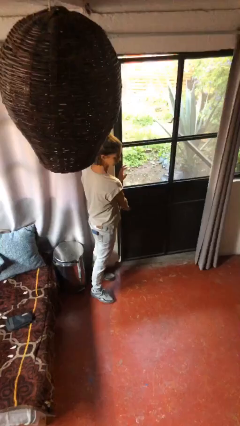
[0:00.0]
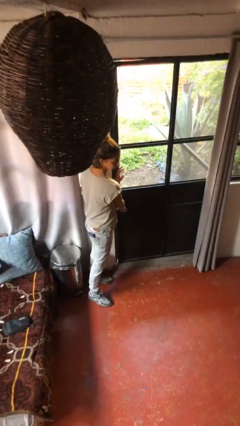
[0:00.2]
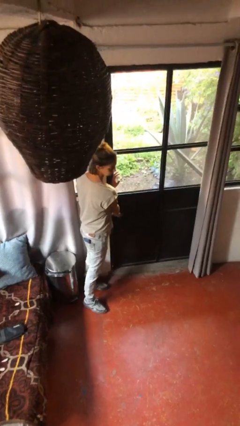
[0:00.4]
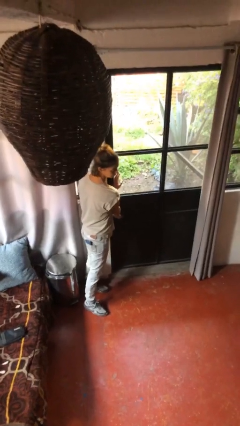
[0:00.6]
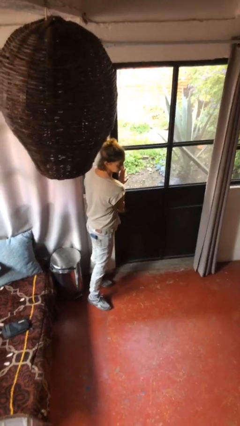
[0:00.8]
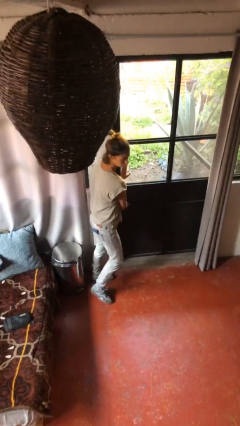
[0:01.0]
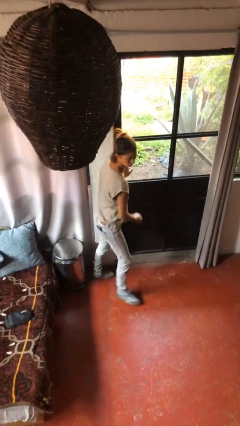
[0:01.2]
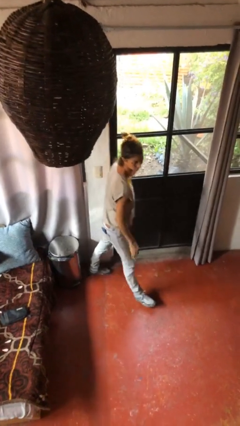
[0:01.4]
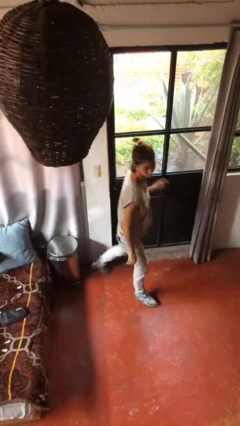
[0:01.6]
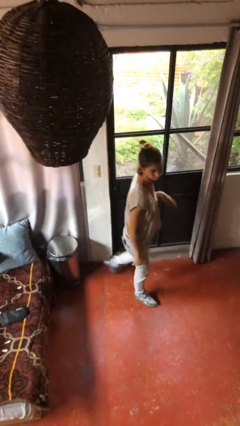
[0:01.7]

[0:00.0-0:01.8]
person closes facility door

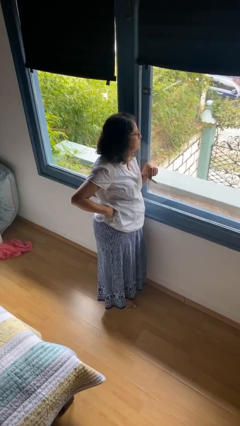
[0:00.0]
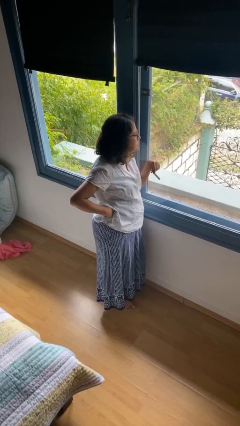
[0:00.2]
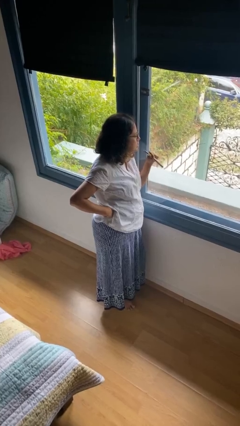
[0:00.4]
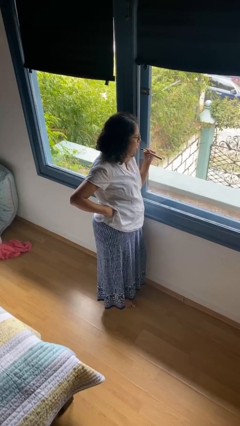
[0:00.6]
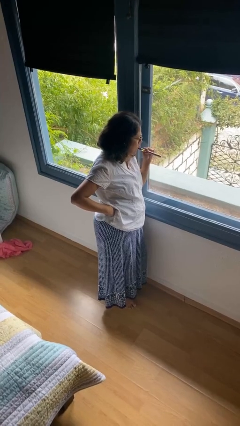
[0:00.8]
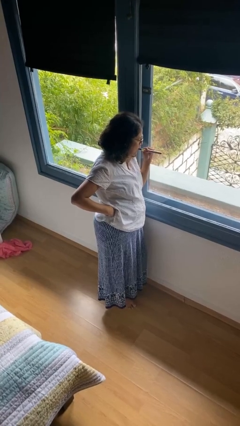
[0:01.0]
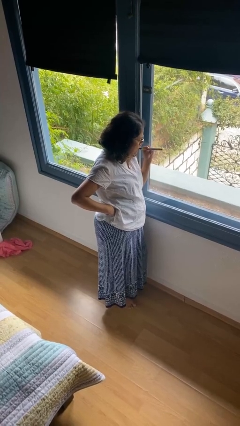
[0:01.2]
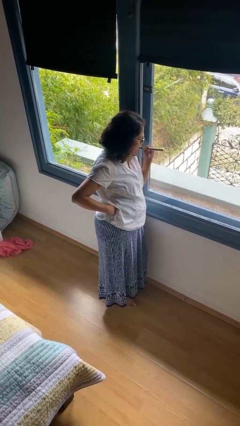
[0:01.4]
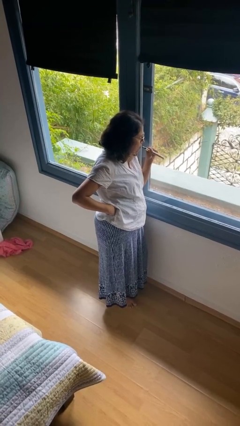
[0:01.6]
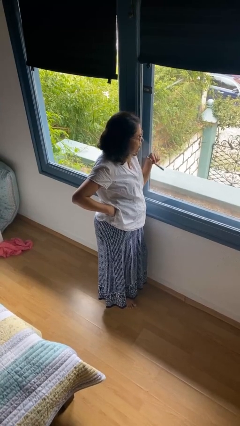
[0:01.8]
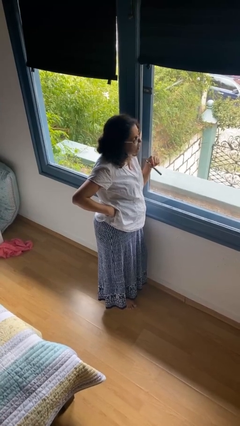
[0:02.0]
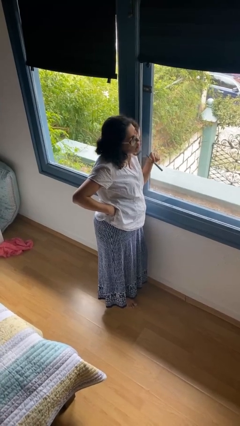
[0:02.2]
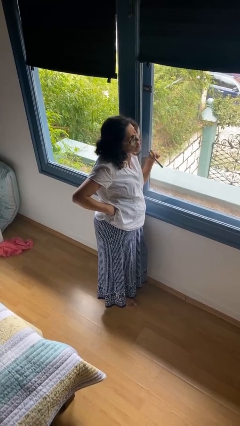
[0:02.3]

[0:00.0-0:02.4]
person vapes

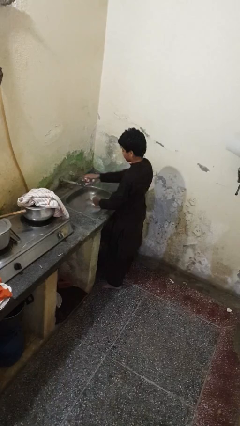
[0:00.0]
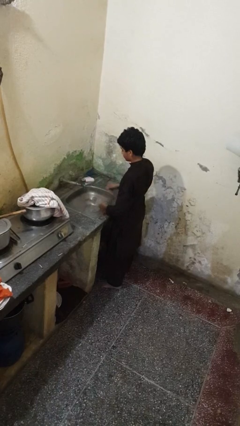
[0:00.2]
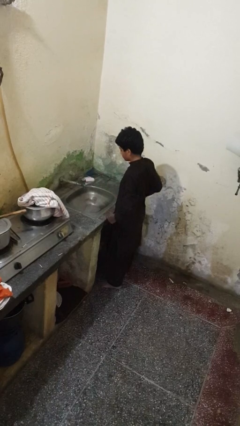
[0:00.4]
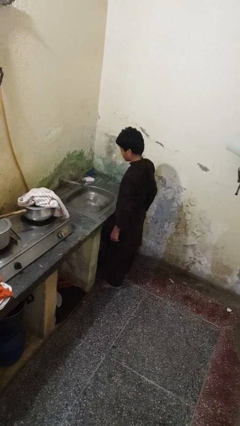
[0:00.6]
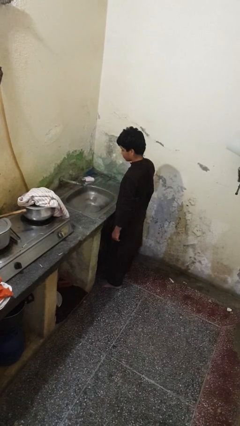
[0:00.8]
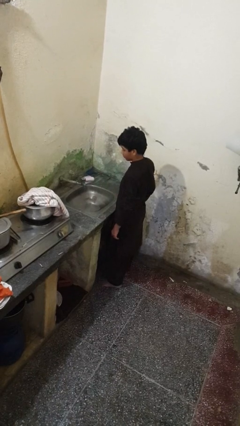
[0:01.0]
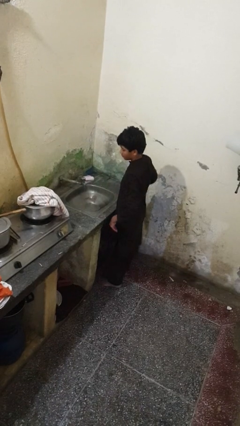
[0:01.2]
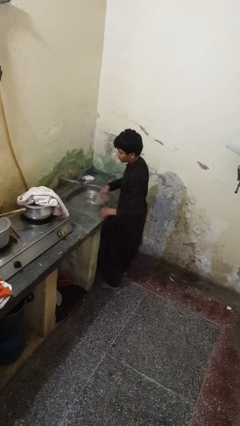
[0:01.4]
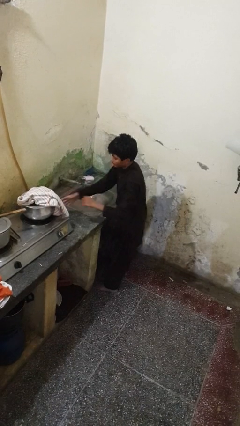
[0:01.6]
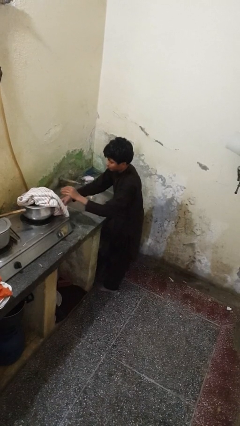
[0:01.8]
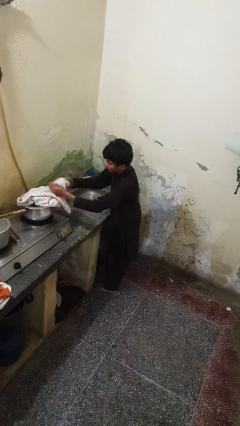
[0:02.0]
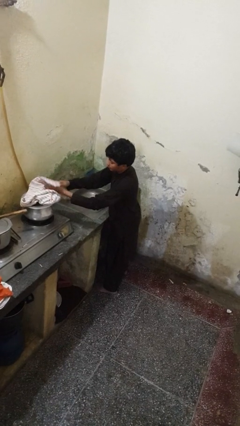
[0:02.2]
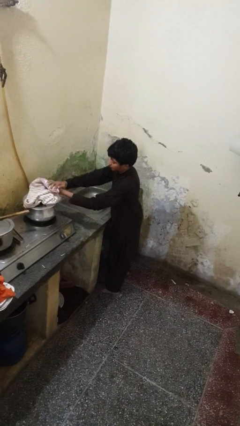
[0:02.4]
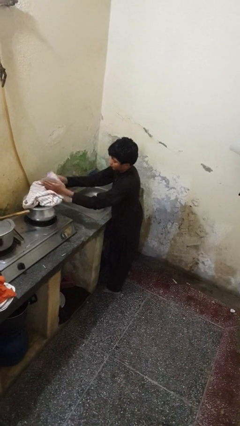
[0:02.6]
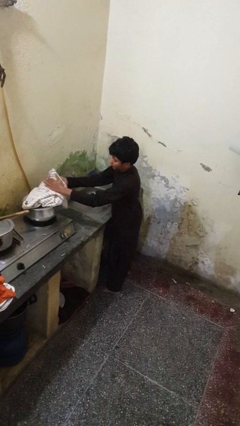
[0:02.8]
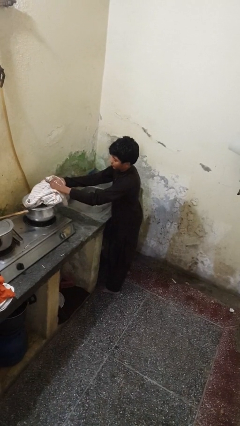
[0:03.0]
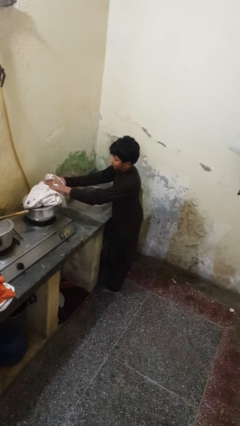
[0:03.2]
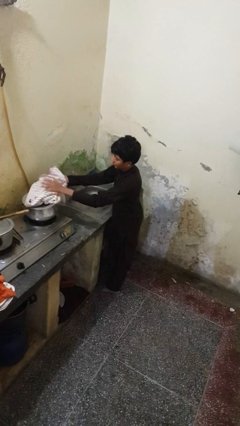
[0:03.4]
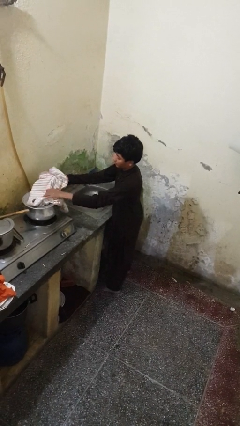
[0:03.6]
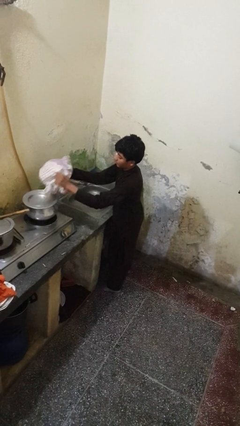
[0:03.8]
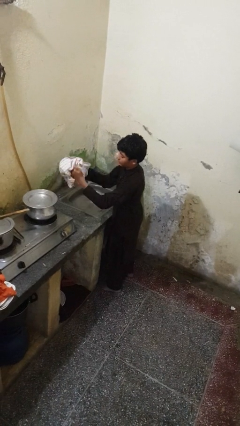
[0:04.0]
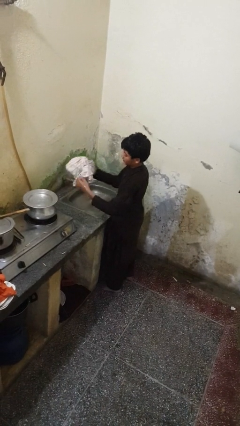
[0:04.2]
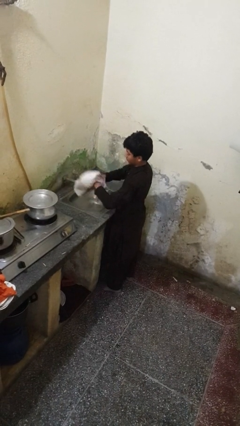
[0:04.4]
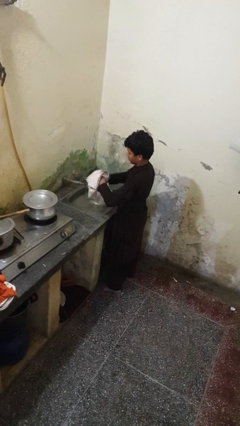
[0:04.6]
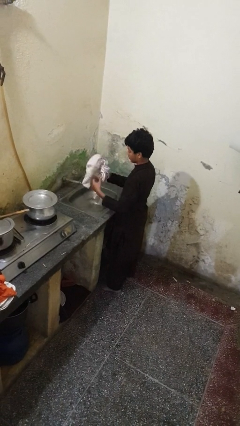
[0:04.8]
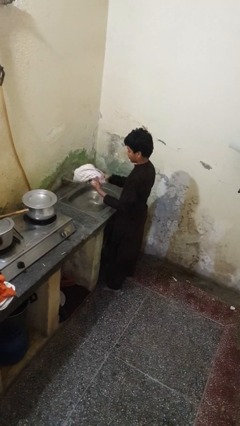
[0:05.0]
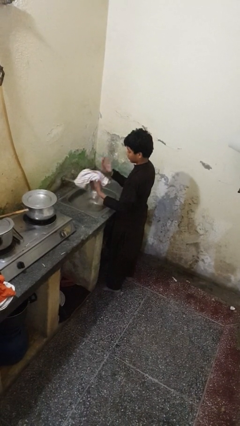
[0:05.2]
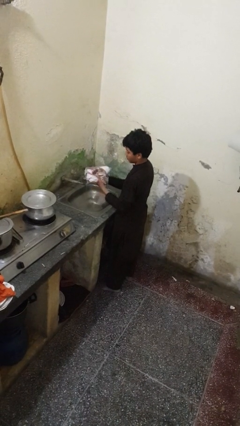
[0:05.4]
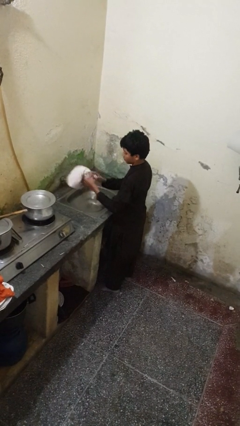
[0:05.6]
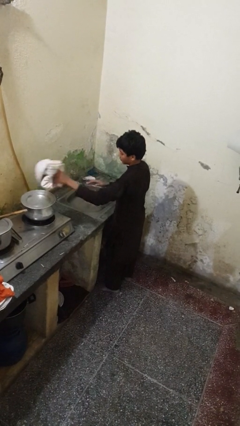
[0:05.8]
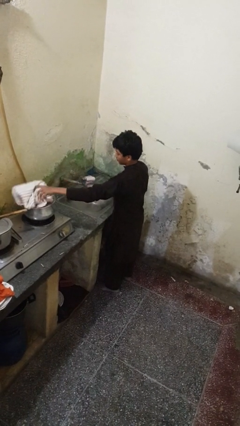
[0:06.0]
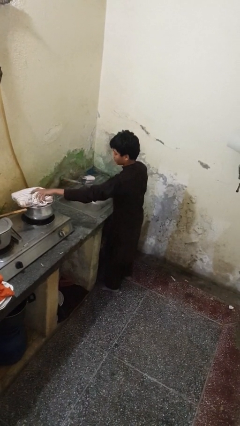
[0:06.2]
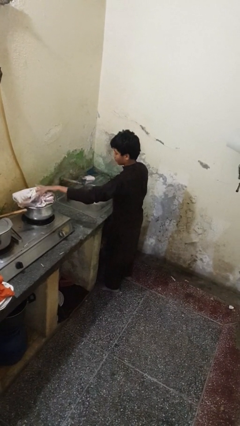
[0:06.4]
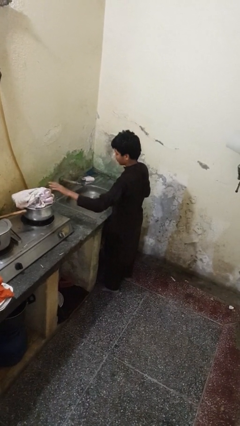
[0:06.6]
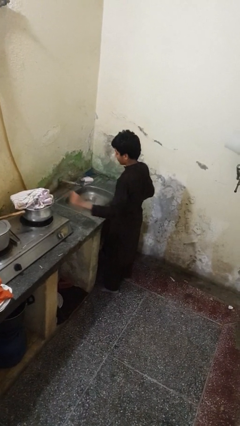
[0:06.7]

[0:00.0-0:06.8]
person dries hands with towel

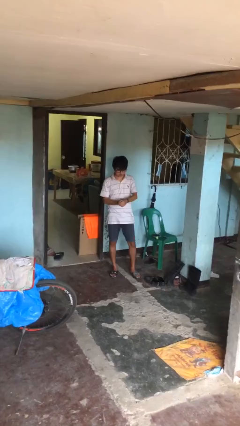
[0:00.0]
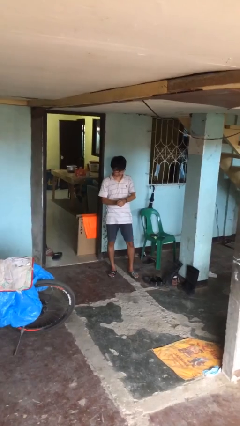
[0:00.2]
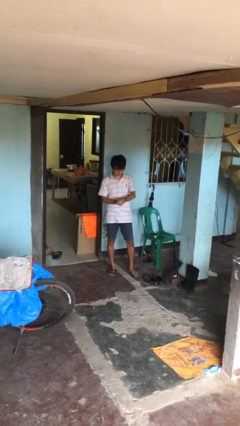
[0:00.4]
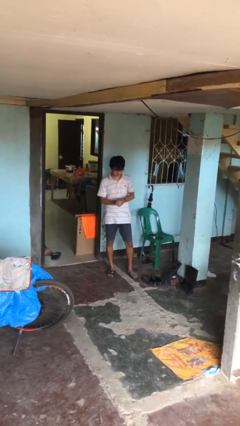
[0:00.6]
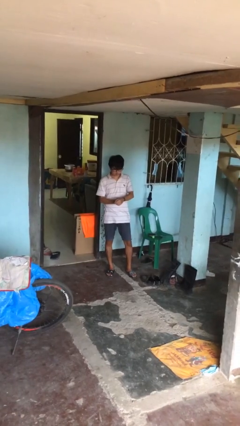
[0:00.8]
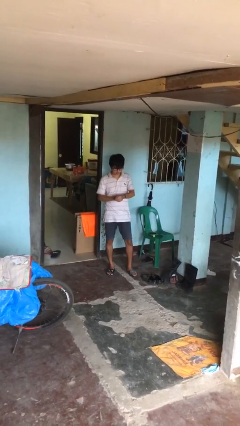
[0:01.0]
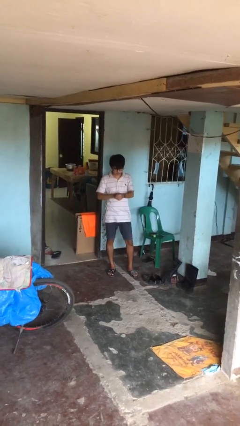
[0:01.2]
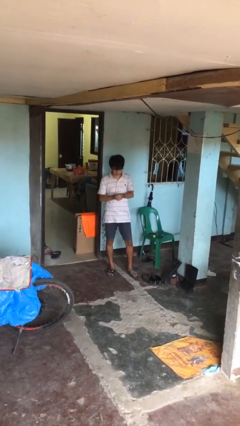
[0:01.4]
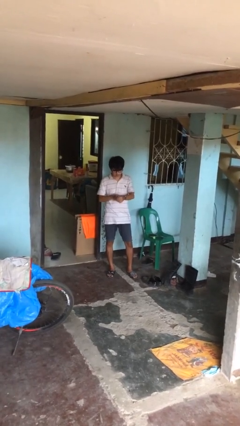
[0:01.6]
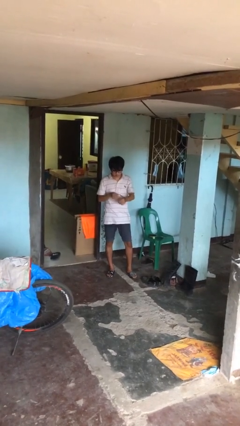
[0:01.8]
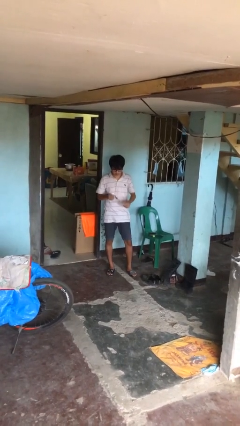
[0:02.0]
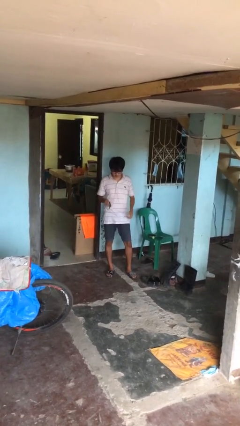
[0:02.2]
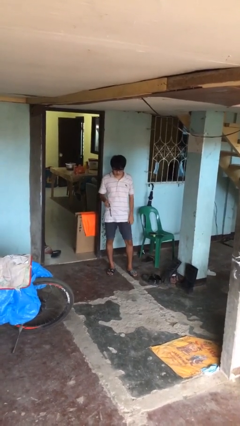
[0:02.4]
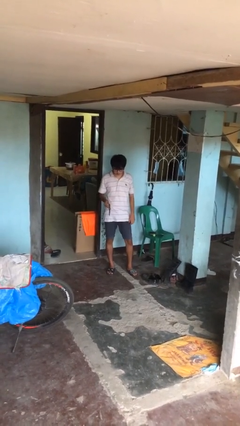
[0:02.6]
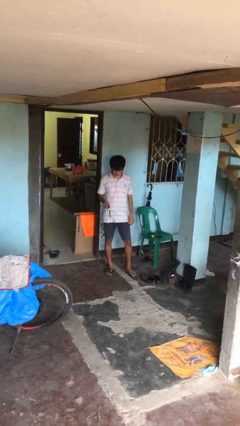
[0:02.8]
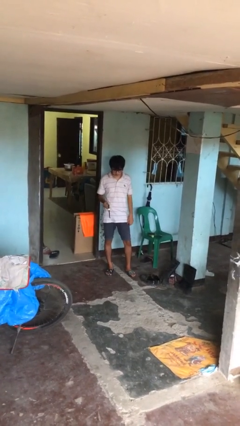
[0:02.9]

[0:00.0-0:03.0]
person takes off wristwatch

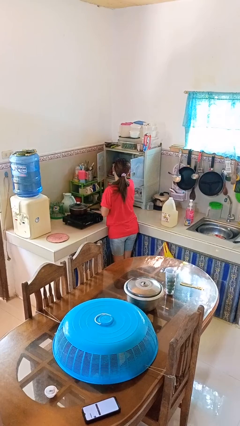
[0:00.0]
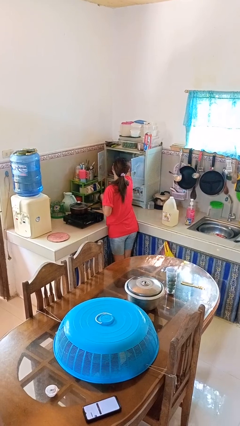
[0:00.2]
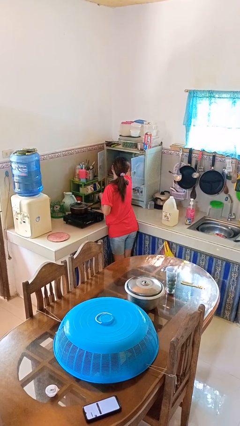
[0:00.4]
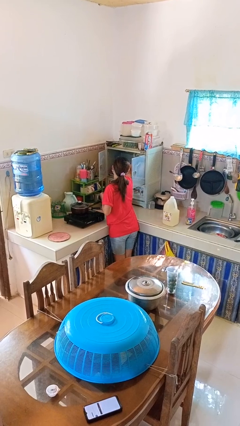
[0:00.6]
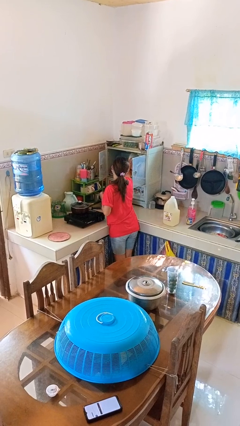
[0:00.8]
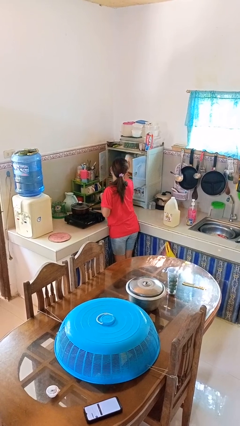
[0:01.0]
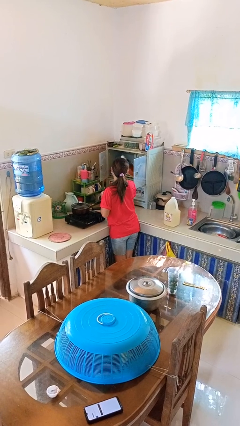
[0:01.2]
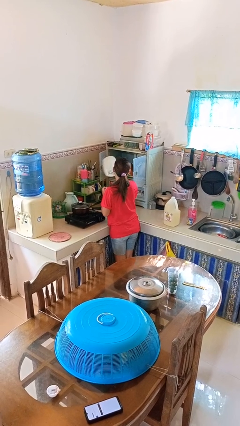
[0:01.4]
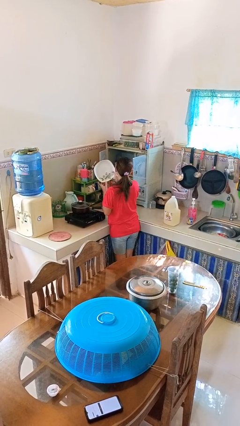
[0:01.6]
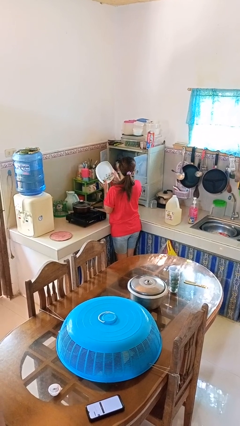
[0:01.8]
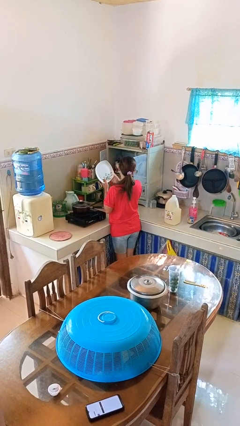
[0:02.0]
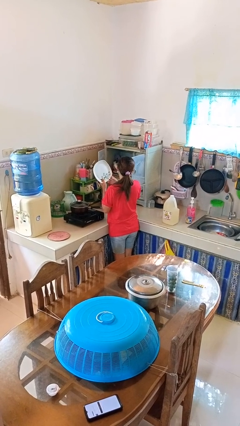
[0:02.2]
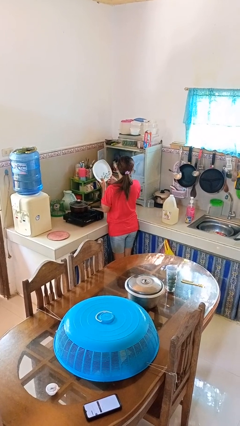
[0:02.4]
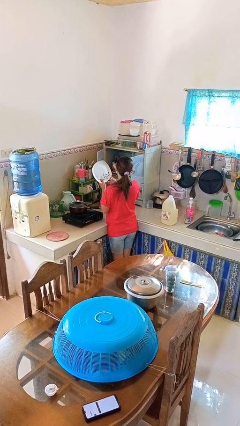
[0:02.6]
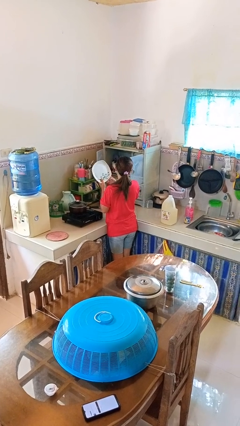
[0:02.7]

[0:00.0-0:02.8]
person takes object from cabinet

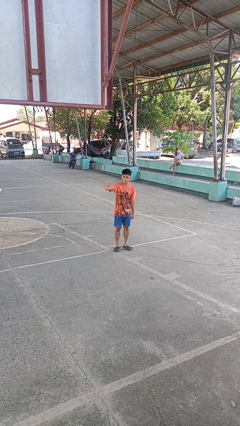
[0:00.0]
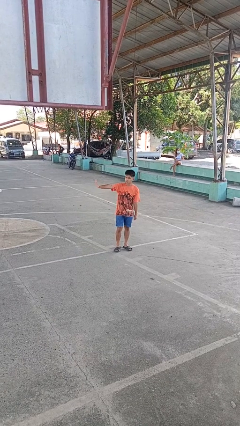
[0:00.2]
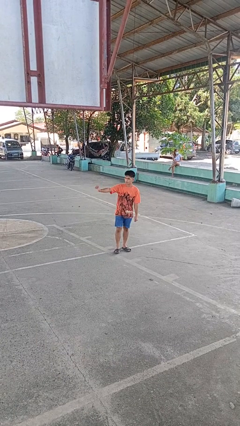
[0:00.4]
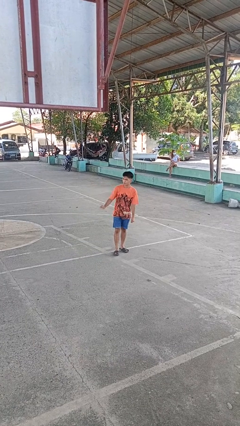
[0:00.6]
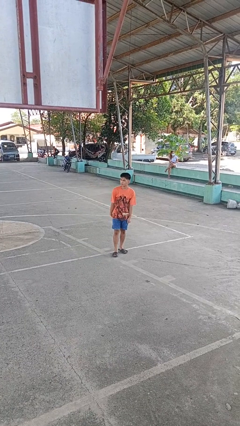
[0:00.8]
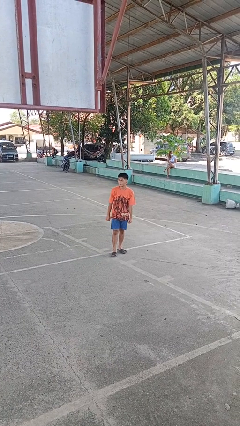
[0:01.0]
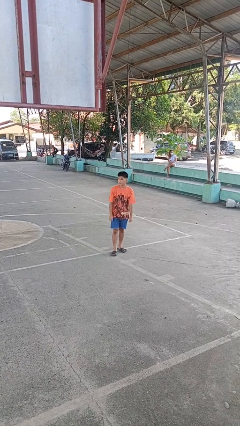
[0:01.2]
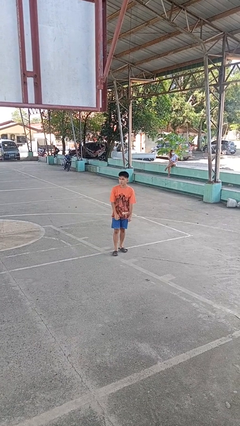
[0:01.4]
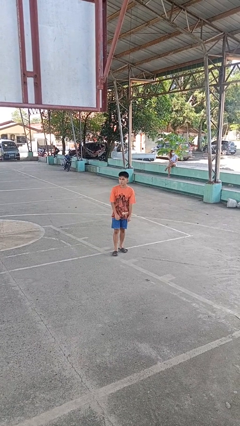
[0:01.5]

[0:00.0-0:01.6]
person gestures swipe right
